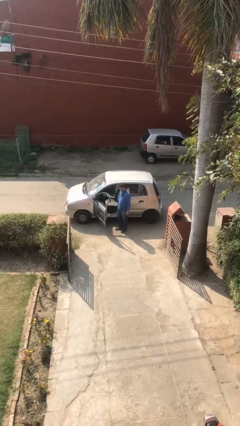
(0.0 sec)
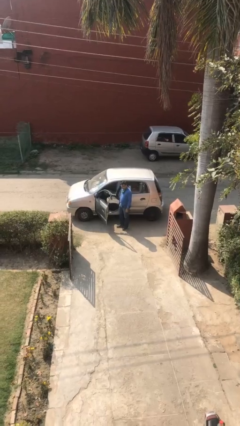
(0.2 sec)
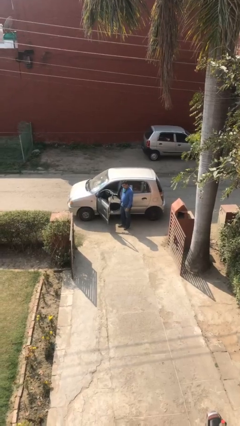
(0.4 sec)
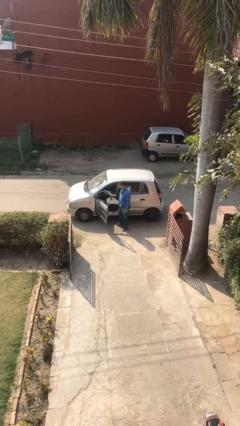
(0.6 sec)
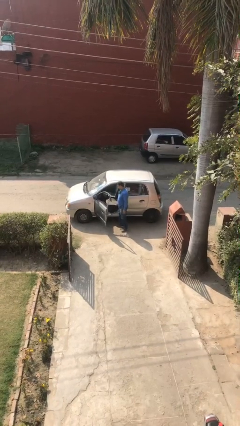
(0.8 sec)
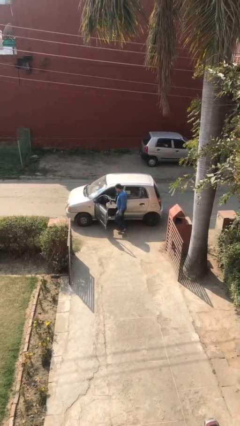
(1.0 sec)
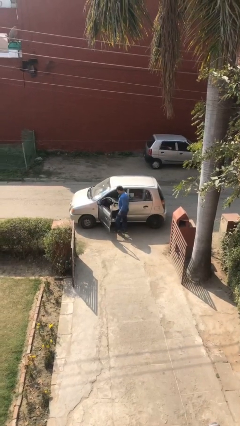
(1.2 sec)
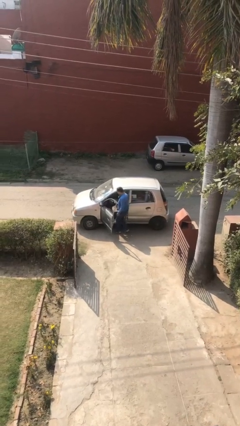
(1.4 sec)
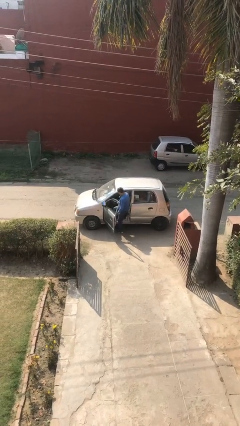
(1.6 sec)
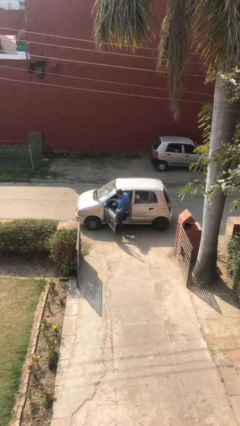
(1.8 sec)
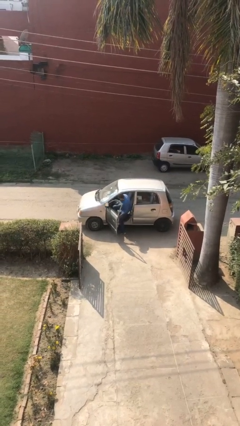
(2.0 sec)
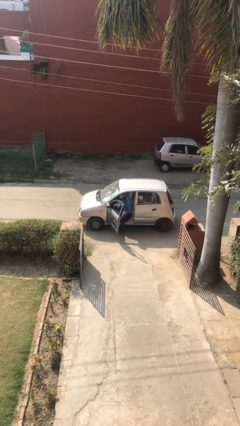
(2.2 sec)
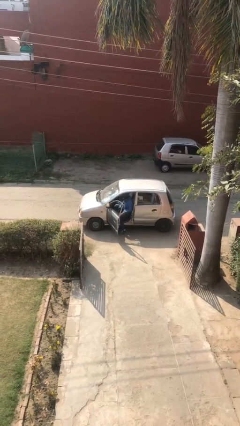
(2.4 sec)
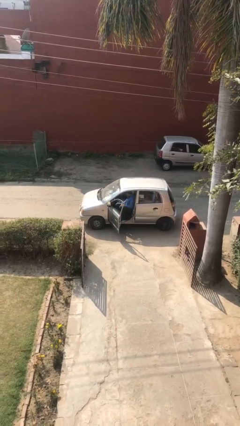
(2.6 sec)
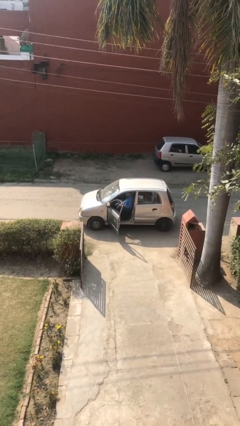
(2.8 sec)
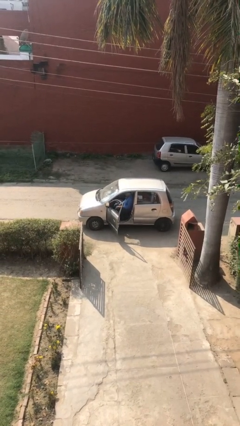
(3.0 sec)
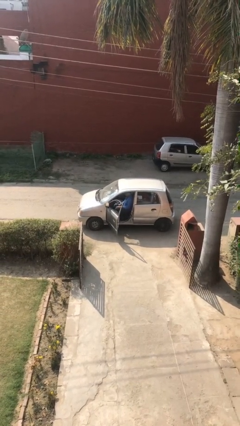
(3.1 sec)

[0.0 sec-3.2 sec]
person enters car

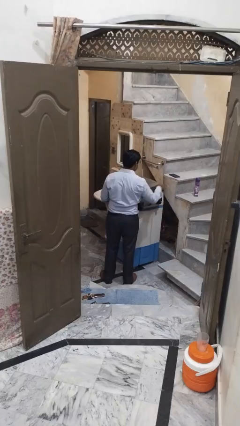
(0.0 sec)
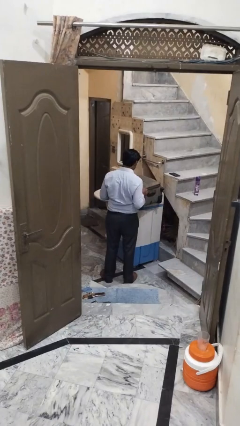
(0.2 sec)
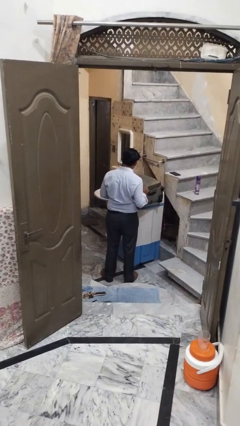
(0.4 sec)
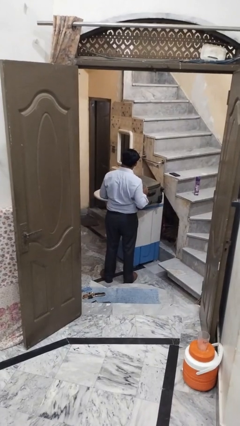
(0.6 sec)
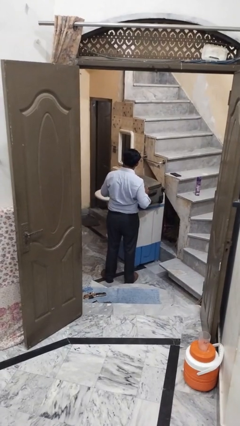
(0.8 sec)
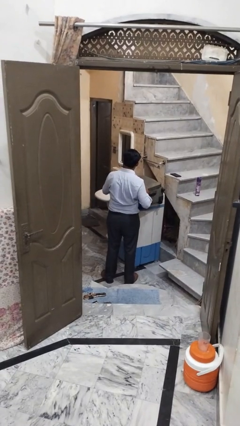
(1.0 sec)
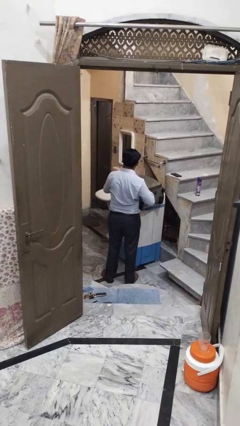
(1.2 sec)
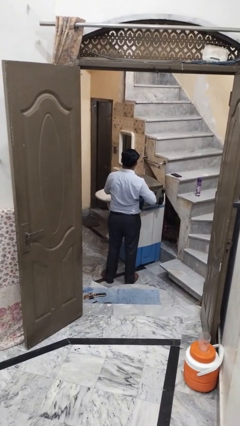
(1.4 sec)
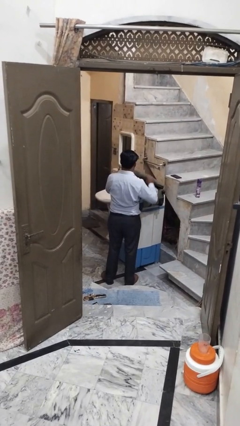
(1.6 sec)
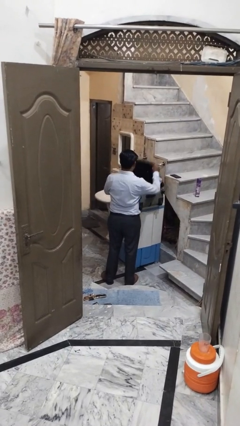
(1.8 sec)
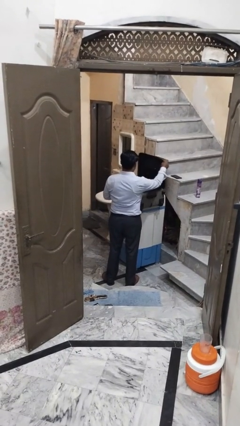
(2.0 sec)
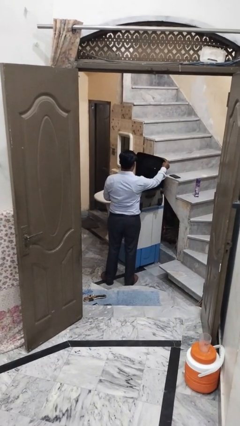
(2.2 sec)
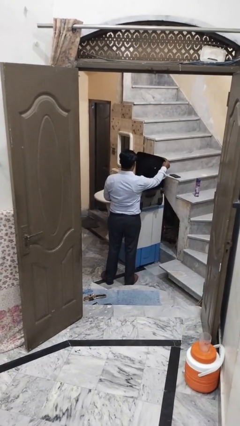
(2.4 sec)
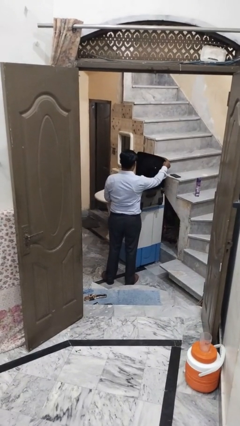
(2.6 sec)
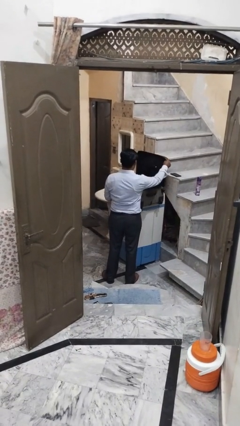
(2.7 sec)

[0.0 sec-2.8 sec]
person opens suitcase

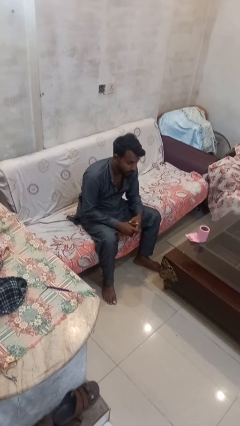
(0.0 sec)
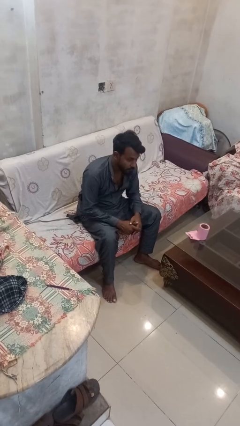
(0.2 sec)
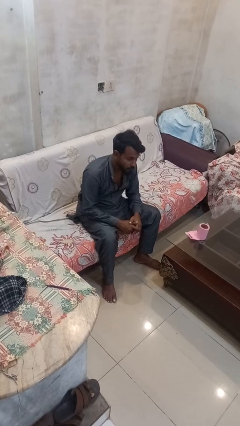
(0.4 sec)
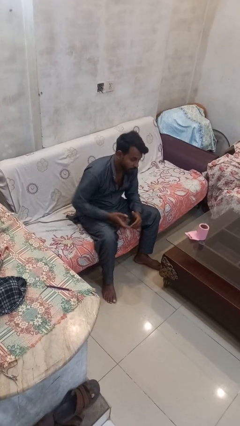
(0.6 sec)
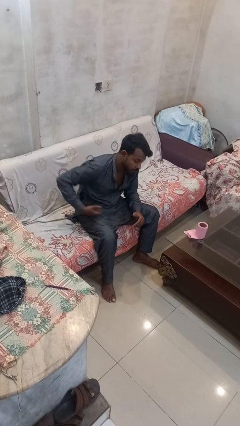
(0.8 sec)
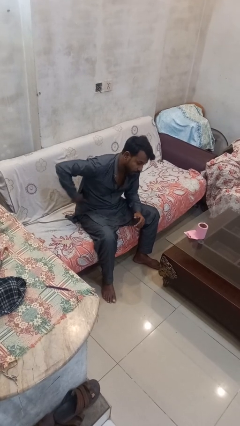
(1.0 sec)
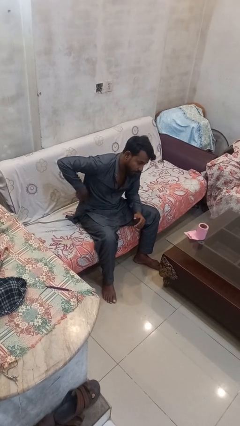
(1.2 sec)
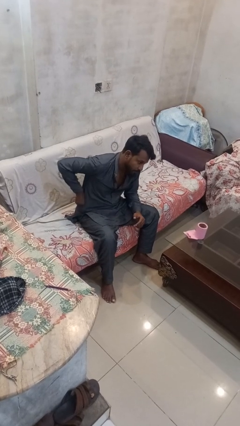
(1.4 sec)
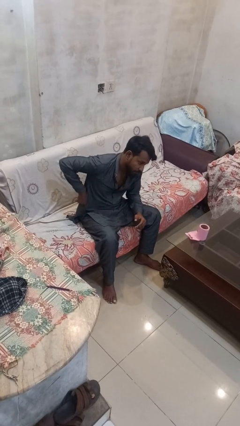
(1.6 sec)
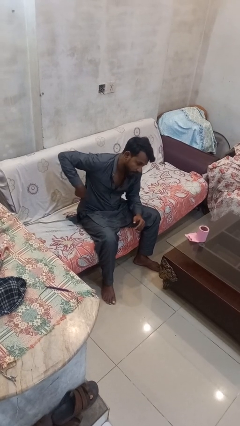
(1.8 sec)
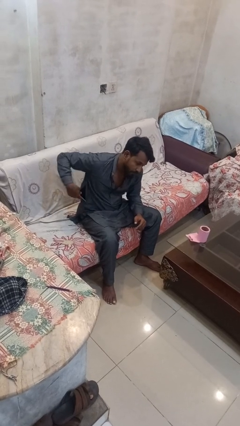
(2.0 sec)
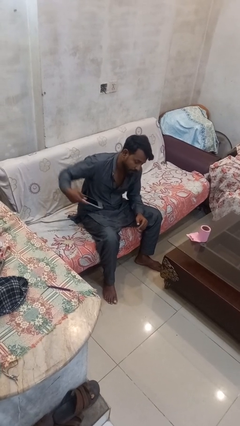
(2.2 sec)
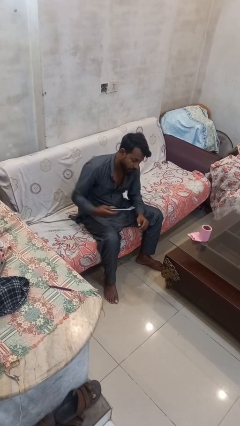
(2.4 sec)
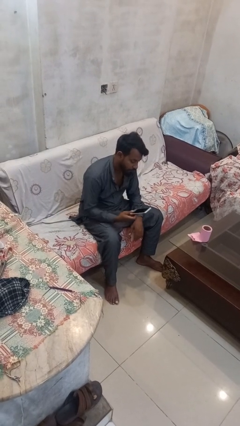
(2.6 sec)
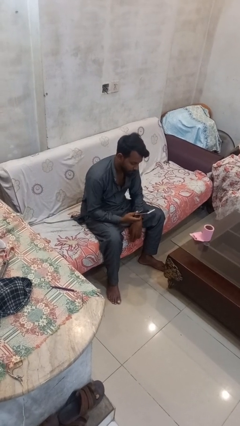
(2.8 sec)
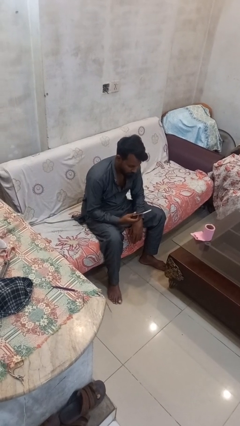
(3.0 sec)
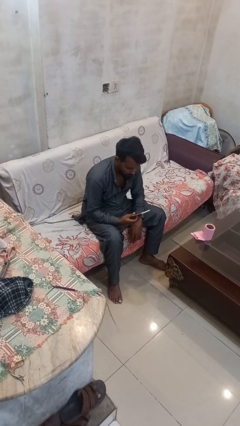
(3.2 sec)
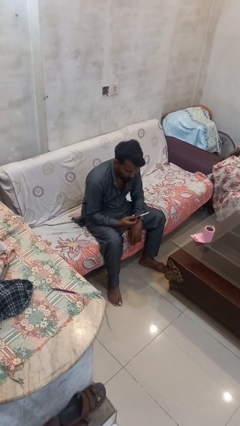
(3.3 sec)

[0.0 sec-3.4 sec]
person takes phone from pocket

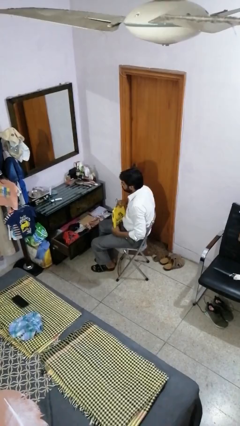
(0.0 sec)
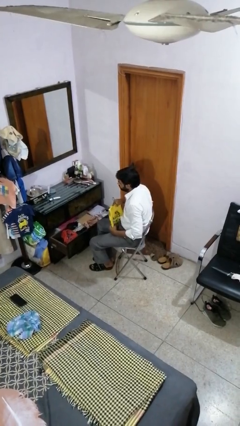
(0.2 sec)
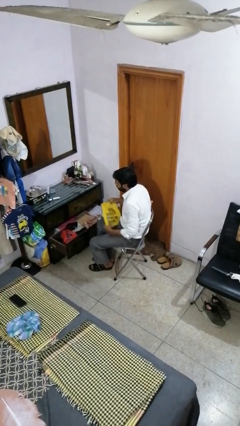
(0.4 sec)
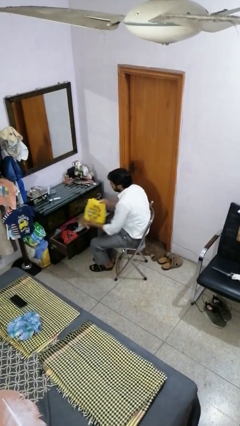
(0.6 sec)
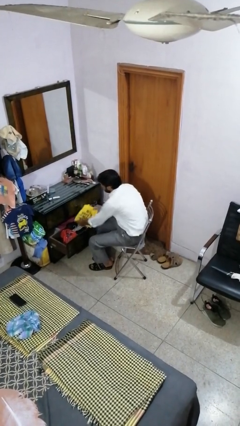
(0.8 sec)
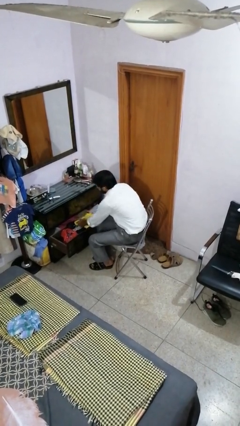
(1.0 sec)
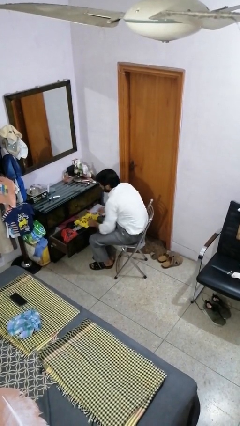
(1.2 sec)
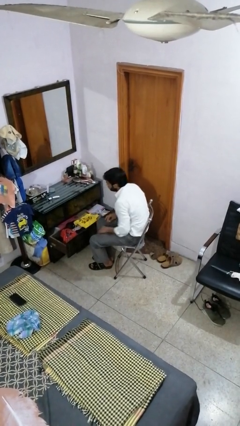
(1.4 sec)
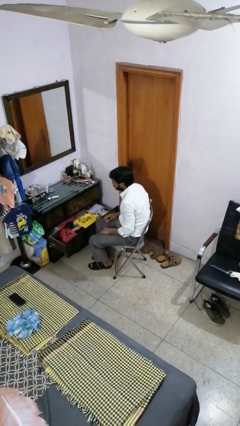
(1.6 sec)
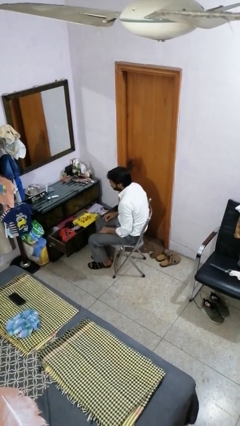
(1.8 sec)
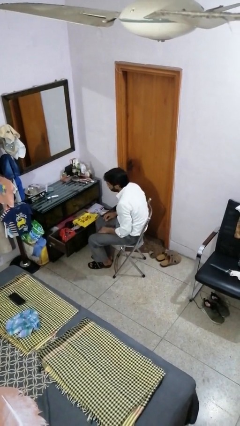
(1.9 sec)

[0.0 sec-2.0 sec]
person puts clothes into dresser

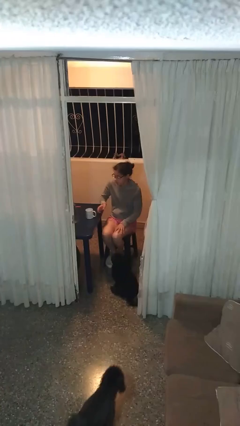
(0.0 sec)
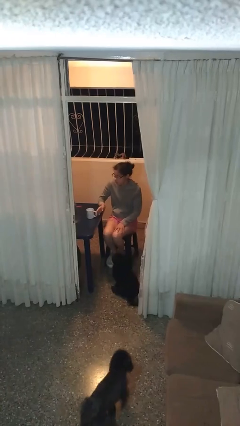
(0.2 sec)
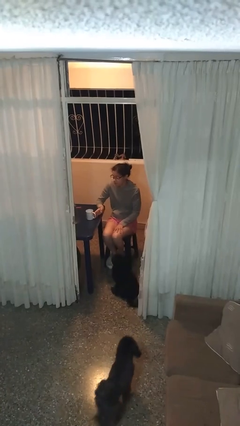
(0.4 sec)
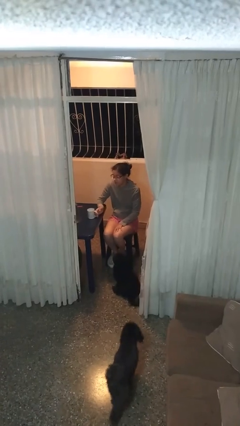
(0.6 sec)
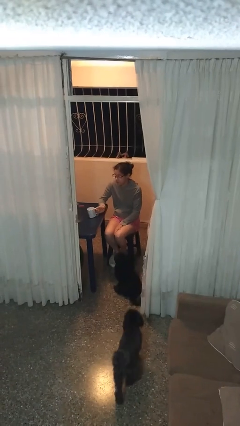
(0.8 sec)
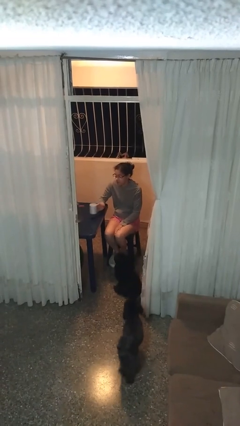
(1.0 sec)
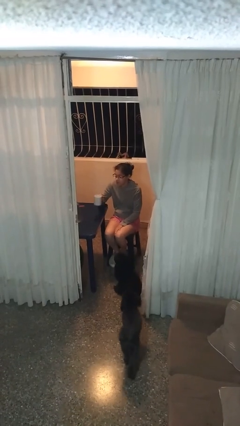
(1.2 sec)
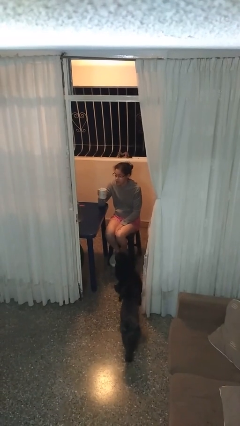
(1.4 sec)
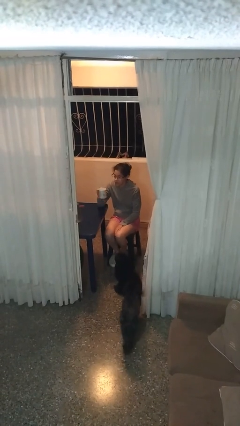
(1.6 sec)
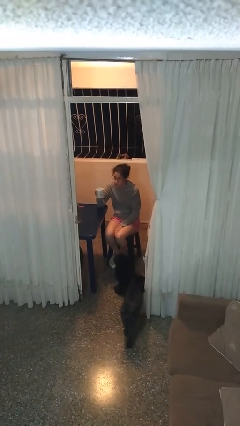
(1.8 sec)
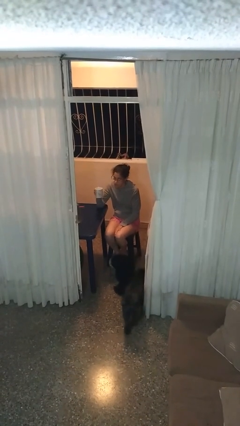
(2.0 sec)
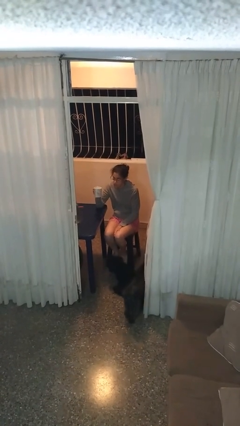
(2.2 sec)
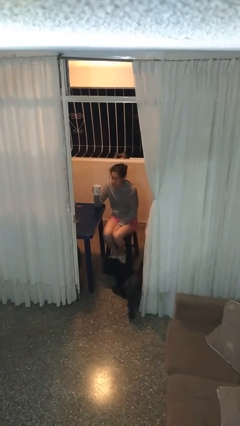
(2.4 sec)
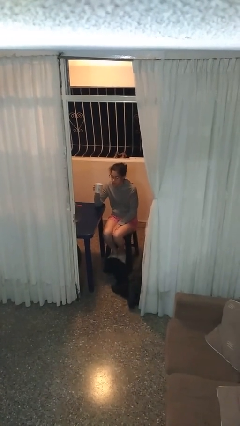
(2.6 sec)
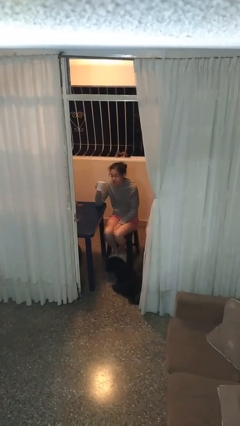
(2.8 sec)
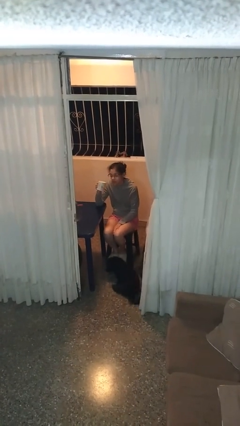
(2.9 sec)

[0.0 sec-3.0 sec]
person picks up object from table

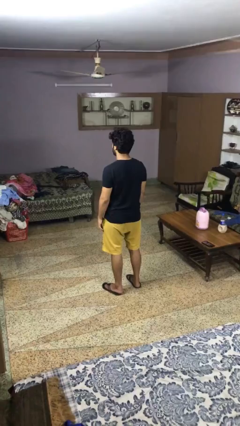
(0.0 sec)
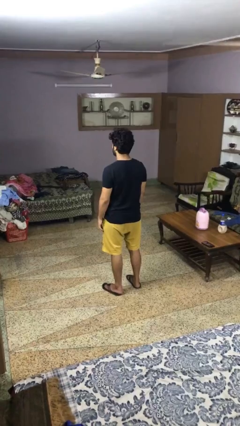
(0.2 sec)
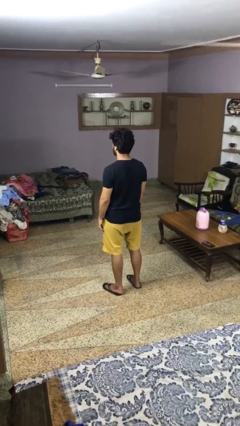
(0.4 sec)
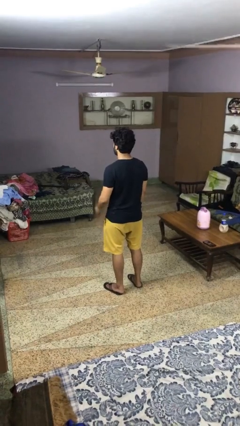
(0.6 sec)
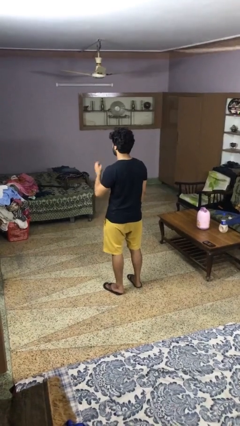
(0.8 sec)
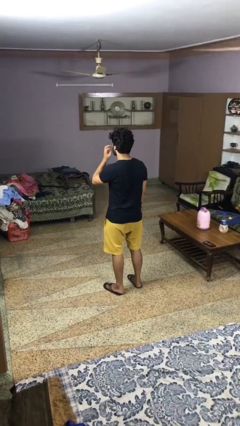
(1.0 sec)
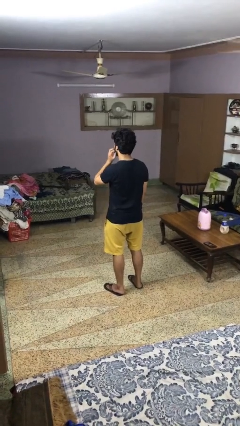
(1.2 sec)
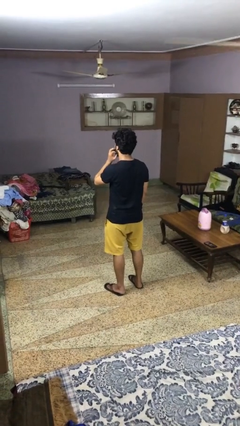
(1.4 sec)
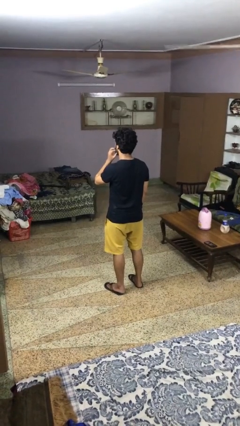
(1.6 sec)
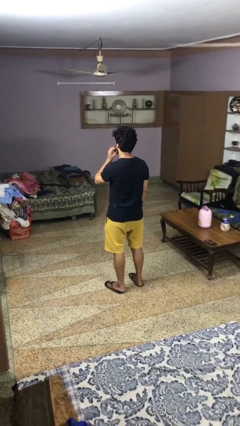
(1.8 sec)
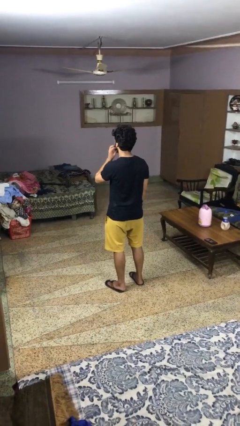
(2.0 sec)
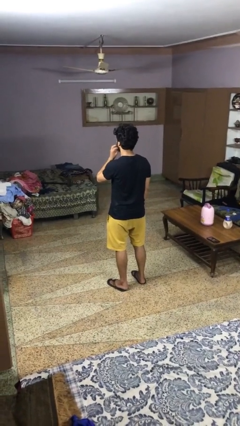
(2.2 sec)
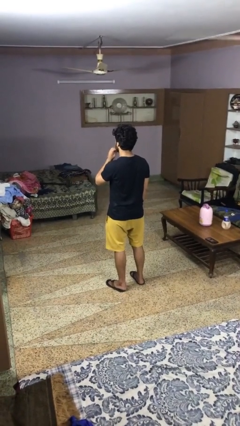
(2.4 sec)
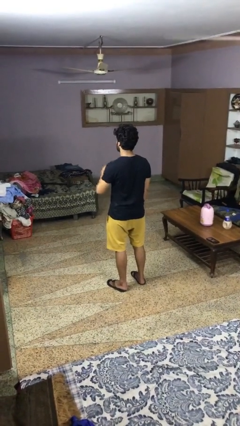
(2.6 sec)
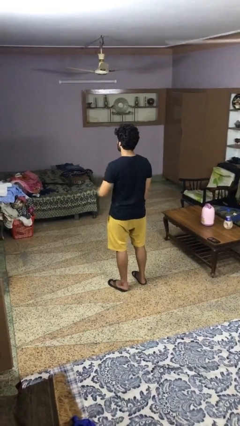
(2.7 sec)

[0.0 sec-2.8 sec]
person scratches face

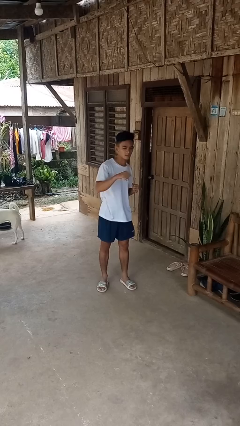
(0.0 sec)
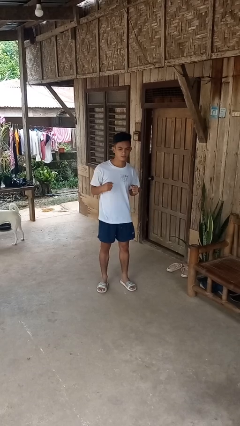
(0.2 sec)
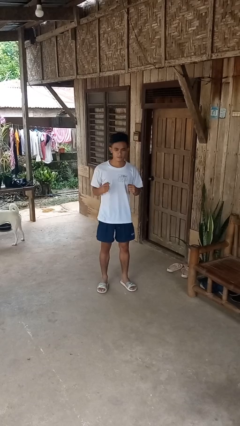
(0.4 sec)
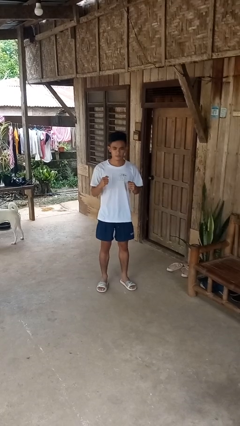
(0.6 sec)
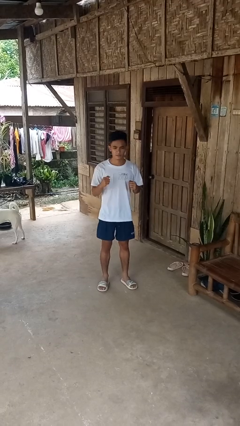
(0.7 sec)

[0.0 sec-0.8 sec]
person punches
